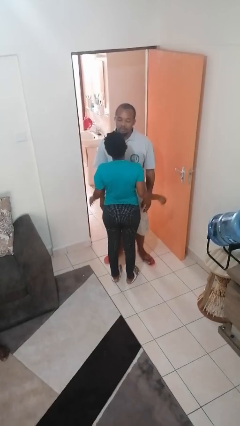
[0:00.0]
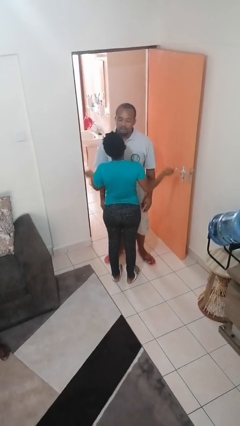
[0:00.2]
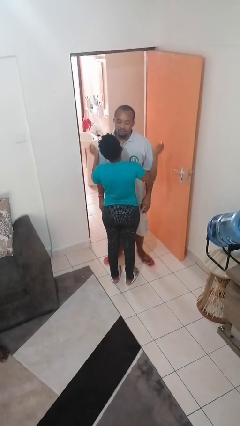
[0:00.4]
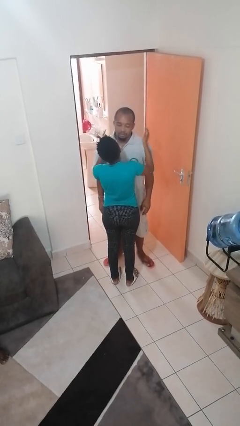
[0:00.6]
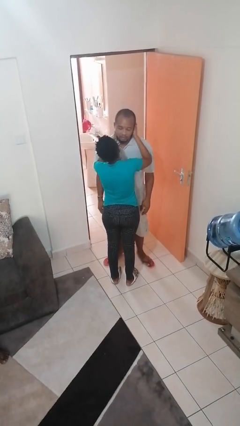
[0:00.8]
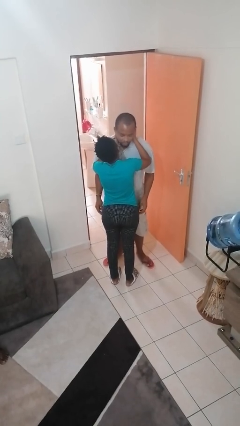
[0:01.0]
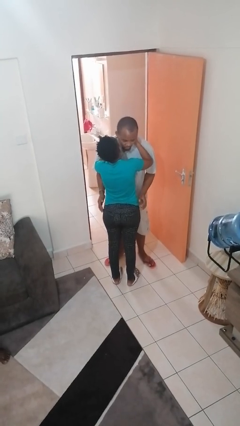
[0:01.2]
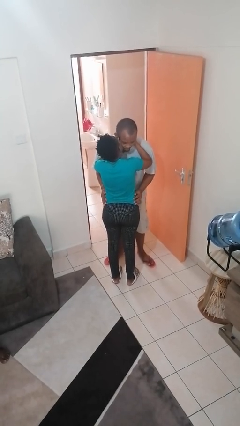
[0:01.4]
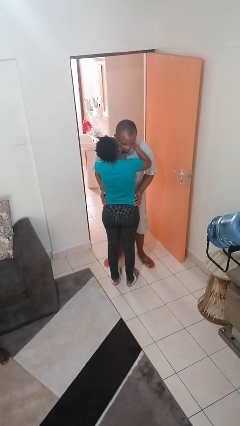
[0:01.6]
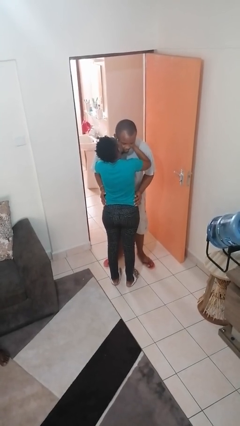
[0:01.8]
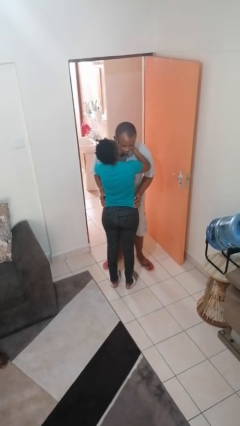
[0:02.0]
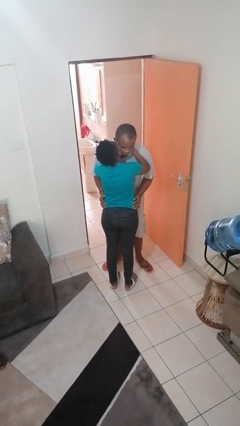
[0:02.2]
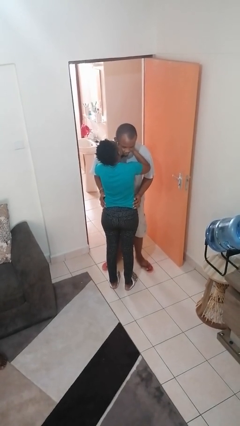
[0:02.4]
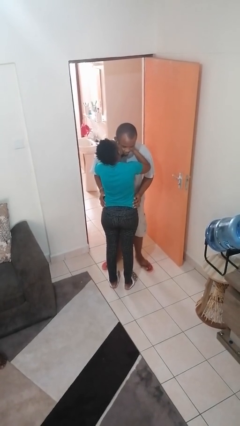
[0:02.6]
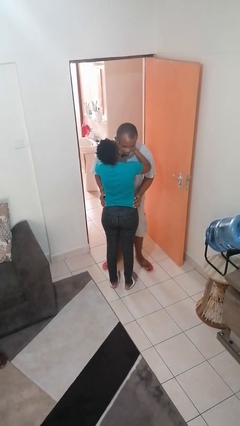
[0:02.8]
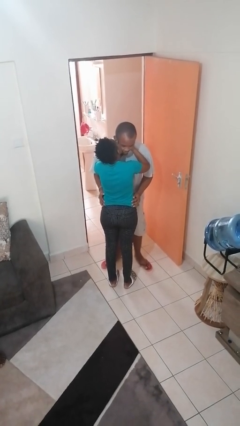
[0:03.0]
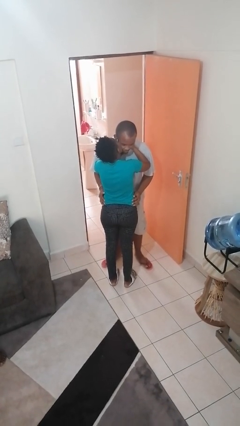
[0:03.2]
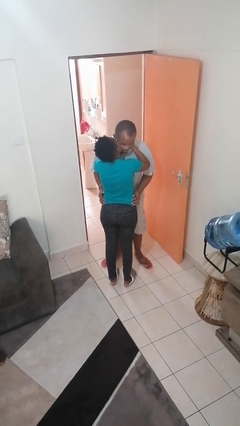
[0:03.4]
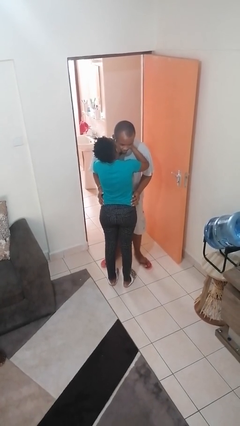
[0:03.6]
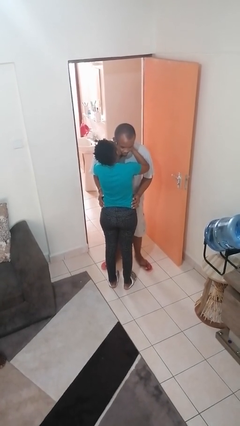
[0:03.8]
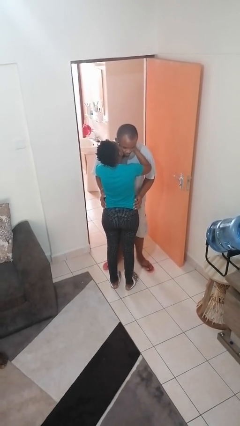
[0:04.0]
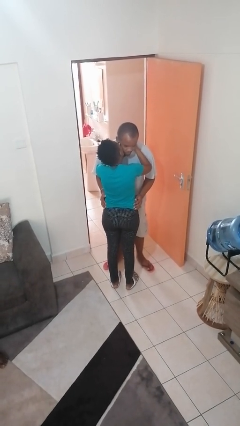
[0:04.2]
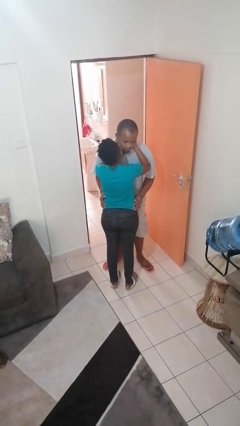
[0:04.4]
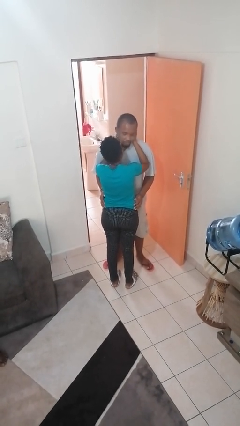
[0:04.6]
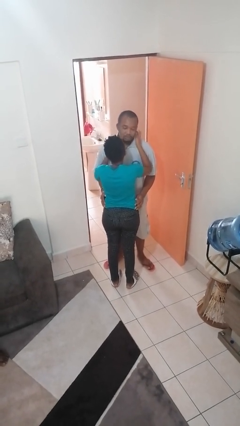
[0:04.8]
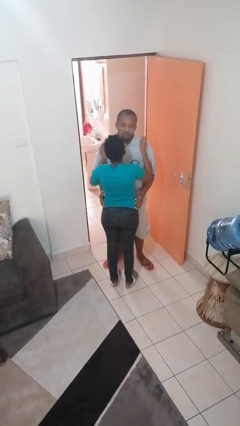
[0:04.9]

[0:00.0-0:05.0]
person kisses cheek of person

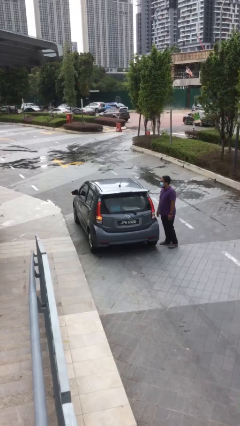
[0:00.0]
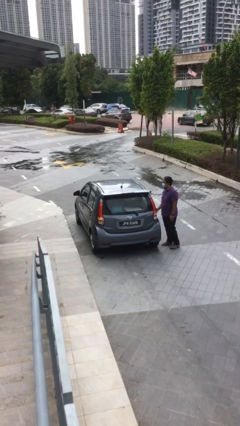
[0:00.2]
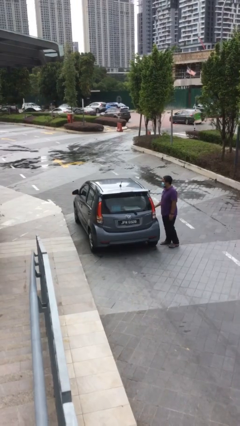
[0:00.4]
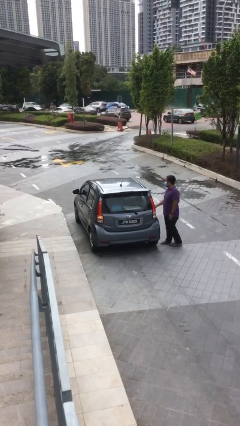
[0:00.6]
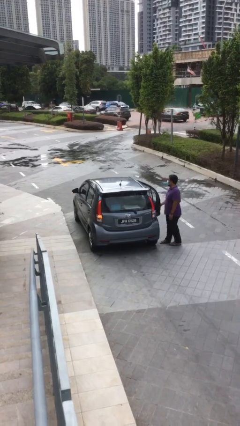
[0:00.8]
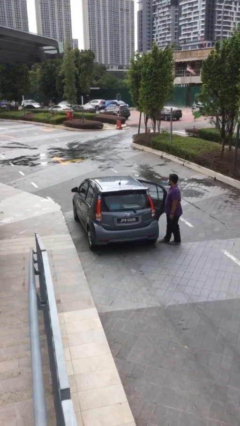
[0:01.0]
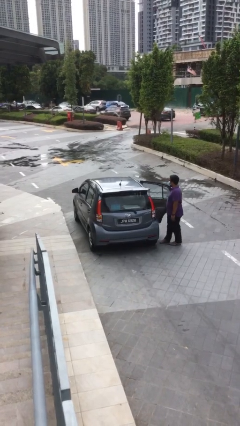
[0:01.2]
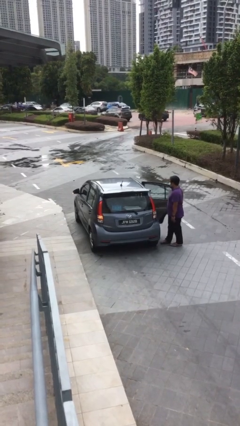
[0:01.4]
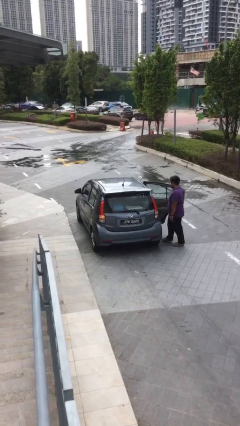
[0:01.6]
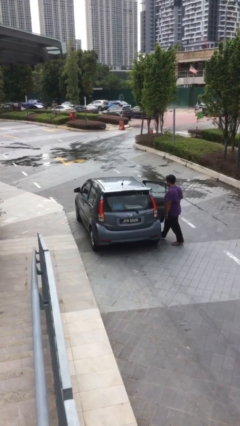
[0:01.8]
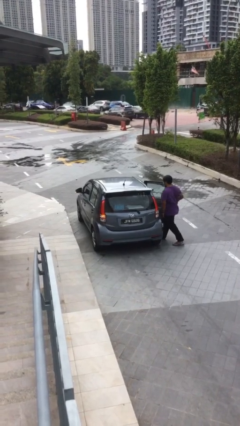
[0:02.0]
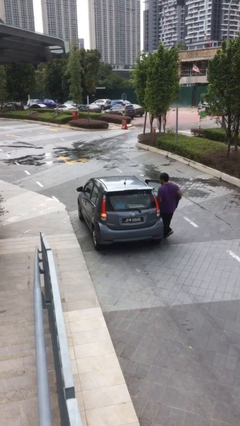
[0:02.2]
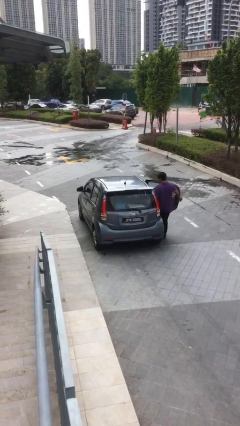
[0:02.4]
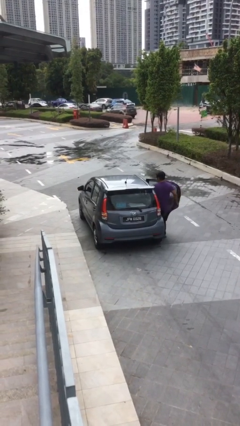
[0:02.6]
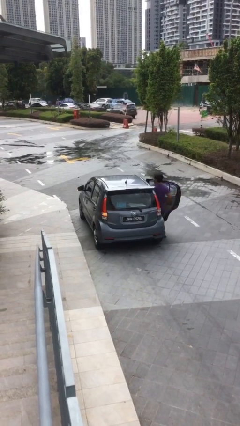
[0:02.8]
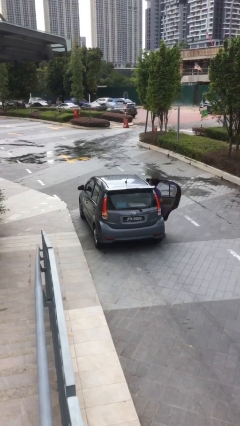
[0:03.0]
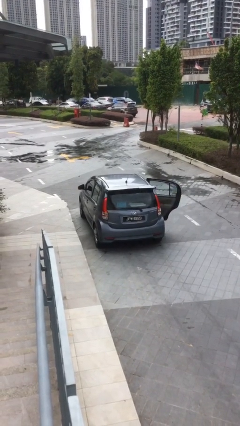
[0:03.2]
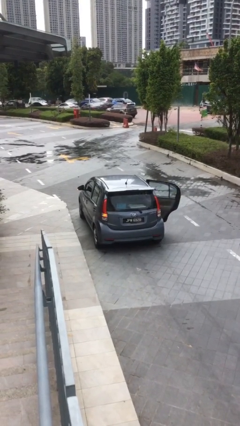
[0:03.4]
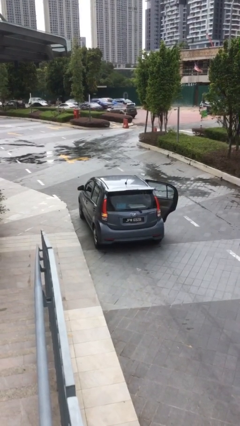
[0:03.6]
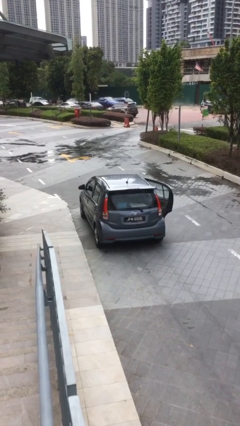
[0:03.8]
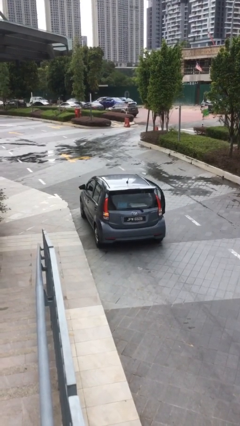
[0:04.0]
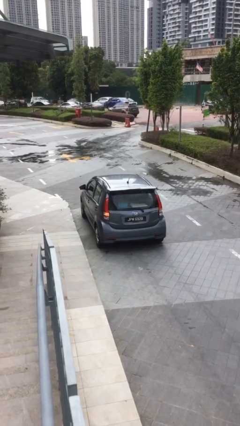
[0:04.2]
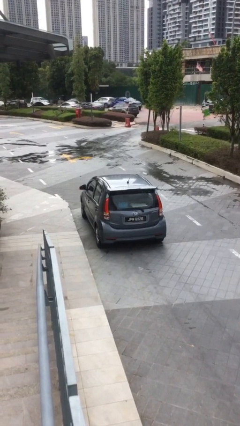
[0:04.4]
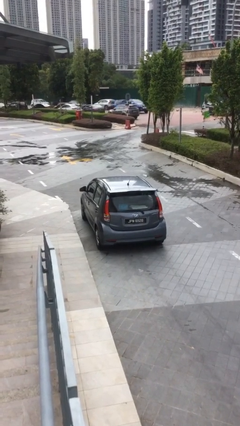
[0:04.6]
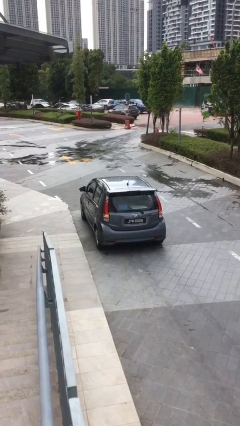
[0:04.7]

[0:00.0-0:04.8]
car picks up person

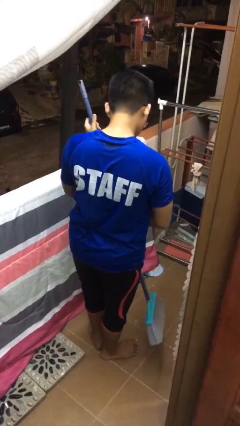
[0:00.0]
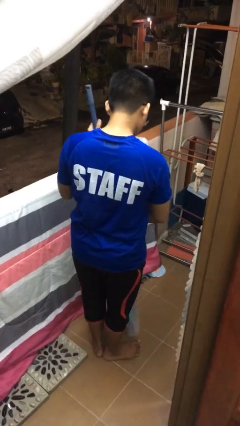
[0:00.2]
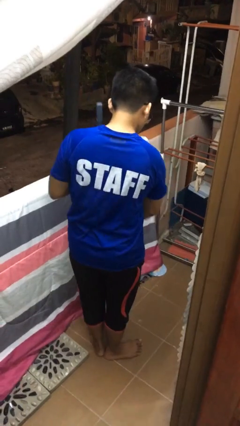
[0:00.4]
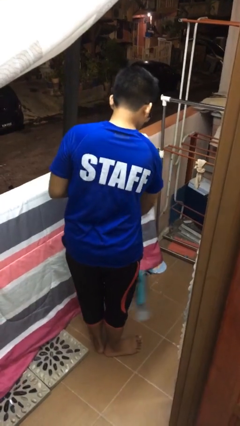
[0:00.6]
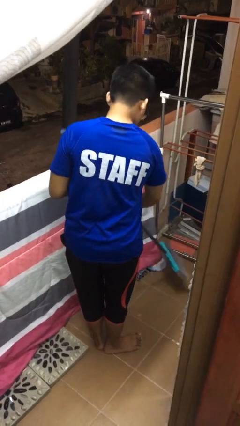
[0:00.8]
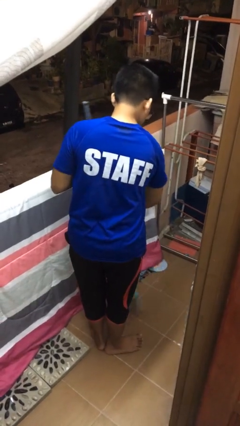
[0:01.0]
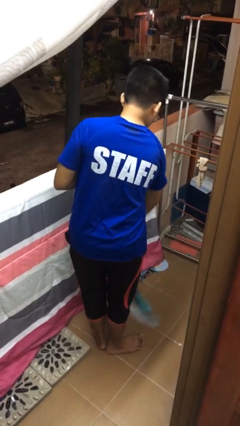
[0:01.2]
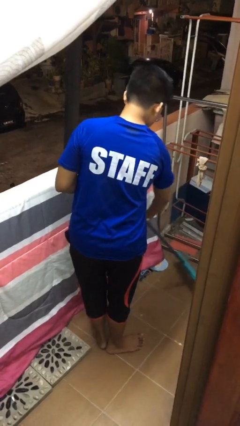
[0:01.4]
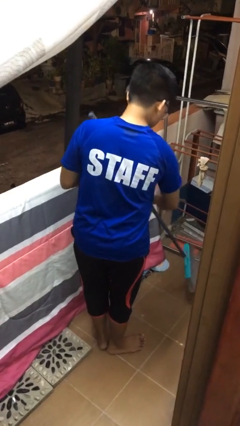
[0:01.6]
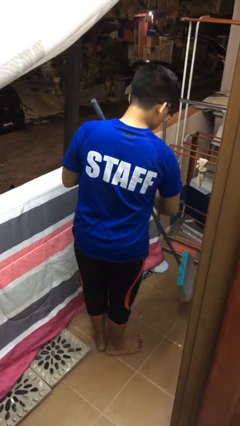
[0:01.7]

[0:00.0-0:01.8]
person sweeps floor

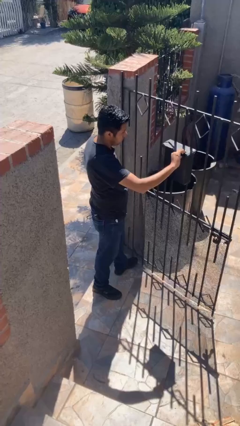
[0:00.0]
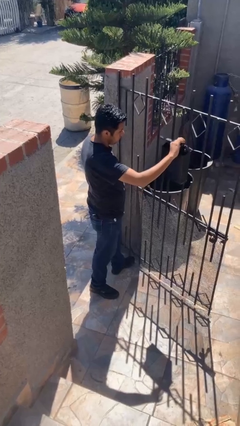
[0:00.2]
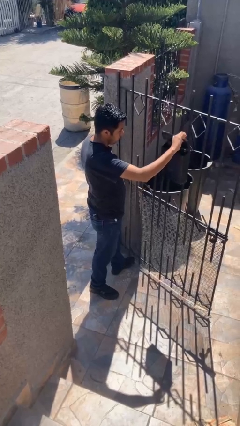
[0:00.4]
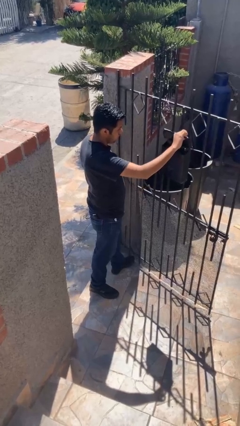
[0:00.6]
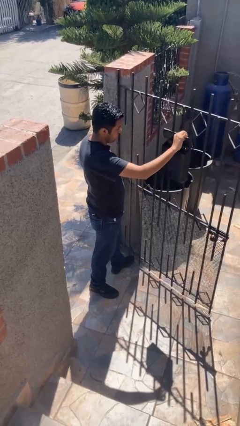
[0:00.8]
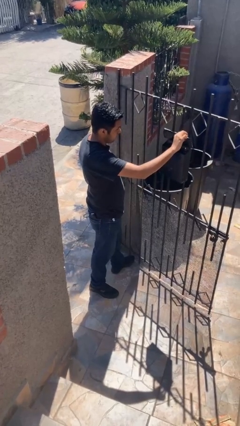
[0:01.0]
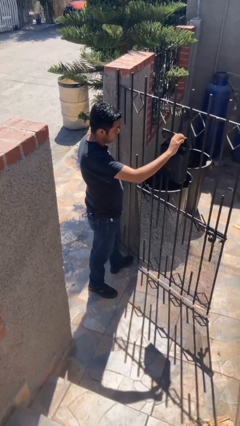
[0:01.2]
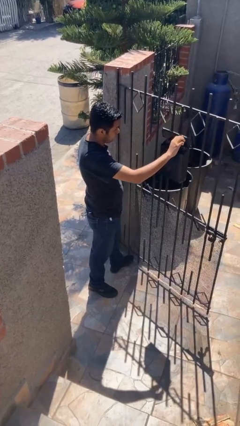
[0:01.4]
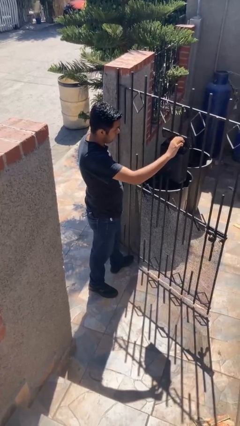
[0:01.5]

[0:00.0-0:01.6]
person opens mailbox

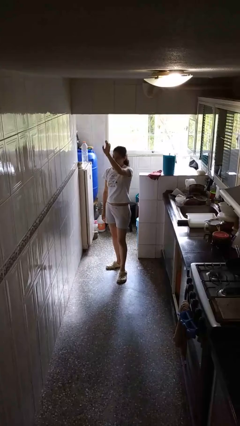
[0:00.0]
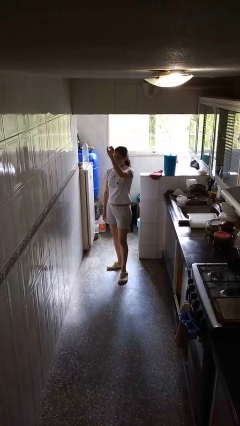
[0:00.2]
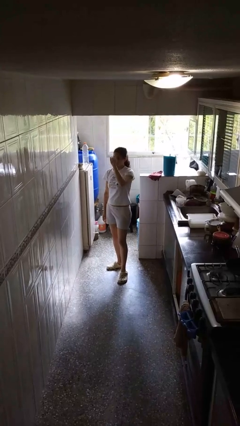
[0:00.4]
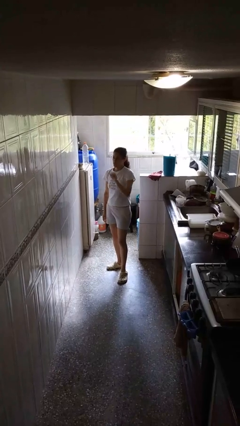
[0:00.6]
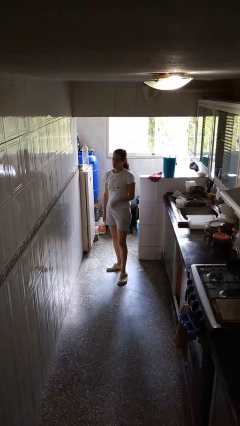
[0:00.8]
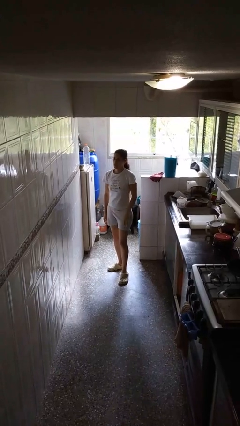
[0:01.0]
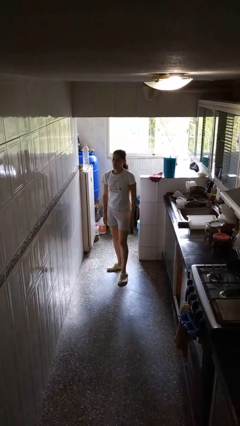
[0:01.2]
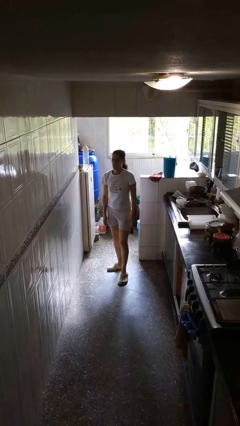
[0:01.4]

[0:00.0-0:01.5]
person gestures lower hand

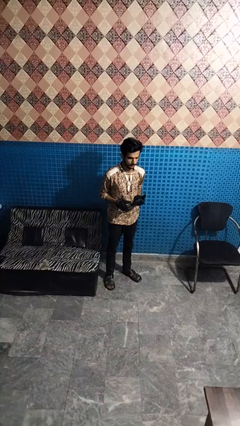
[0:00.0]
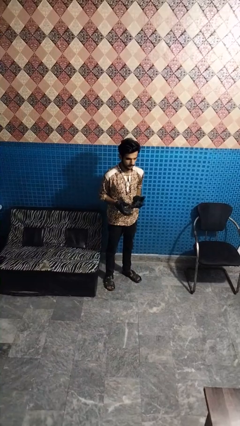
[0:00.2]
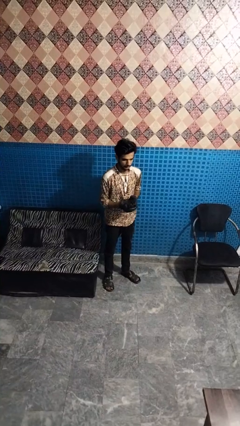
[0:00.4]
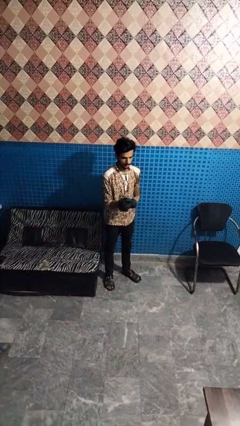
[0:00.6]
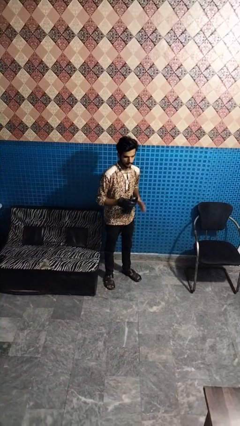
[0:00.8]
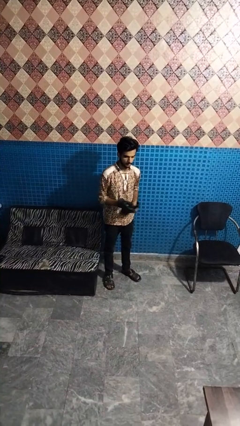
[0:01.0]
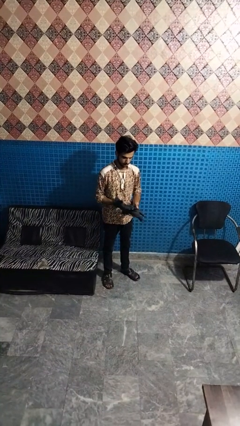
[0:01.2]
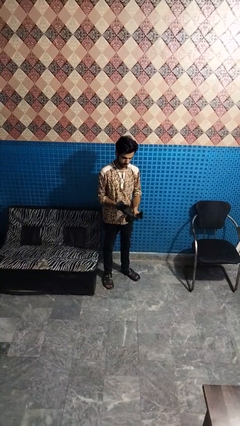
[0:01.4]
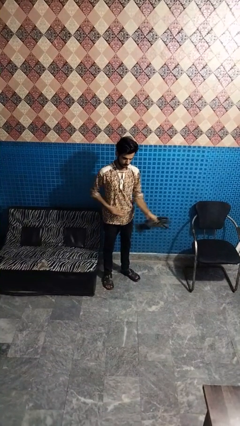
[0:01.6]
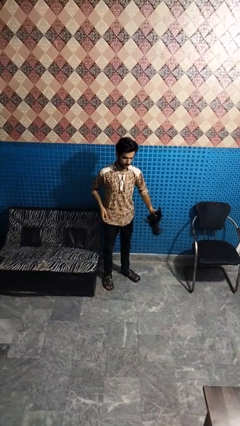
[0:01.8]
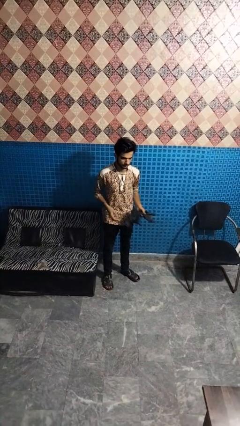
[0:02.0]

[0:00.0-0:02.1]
person takes off gloves

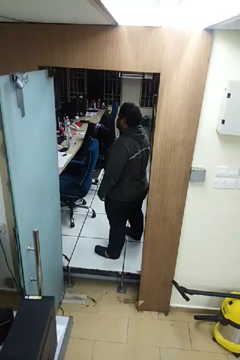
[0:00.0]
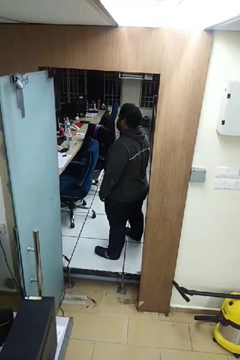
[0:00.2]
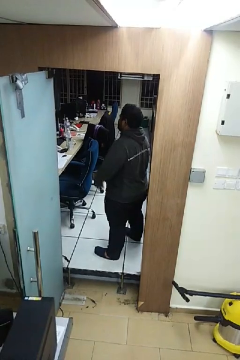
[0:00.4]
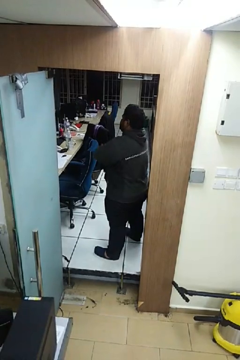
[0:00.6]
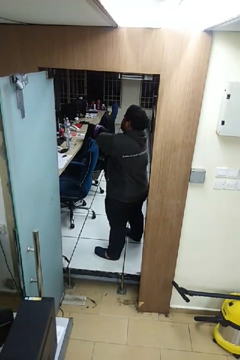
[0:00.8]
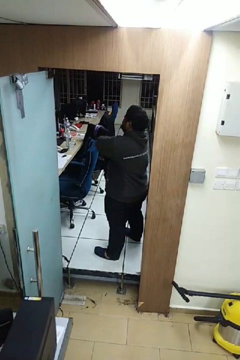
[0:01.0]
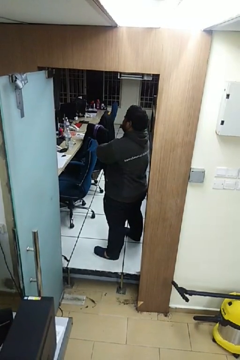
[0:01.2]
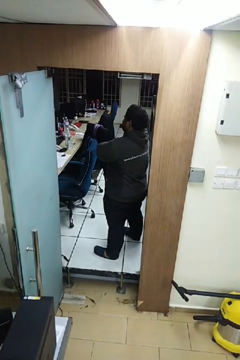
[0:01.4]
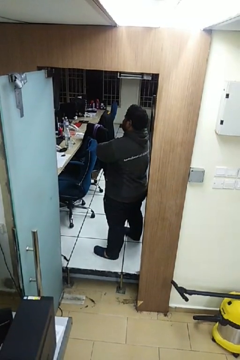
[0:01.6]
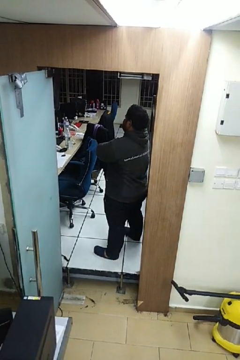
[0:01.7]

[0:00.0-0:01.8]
person crosses arms
